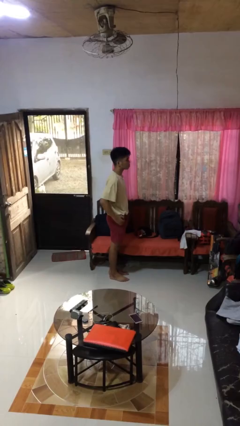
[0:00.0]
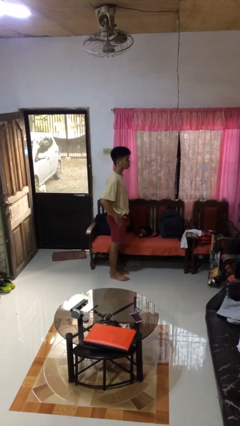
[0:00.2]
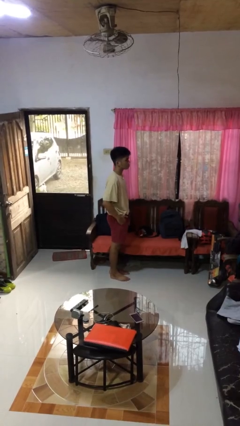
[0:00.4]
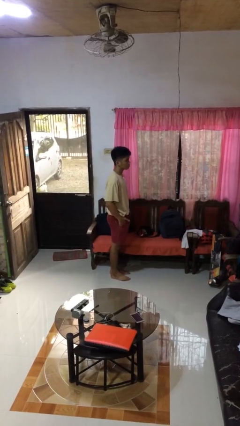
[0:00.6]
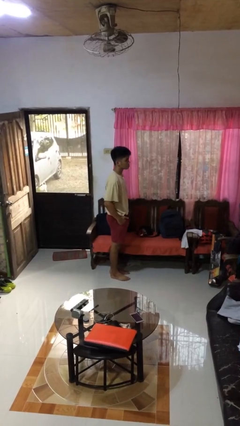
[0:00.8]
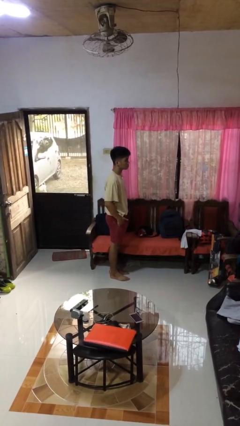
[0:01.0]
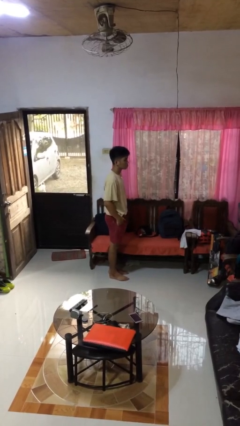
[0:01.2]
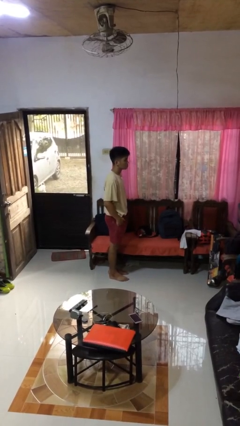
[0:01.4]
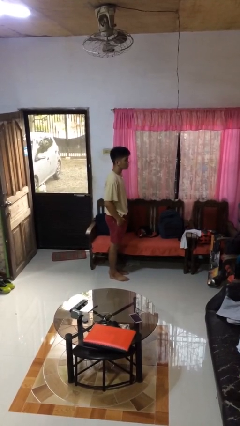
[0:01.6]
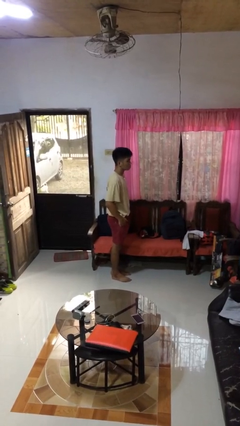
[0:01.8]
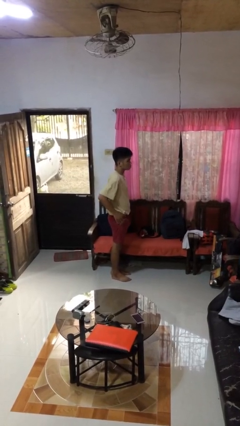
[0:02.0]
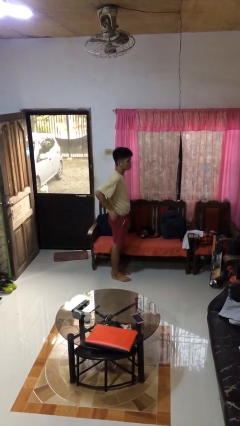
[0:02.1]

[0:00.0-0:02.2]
person puts hands in back pockets

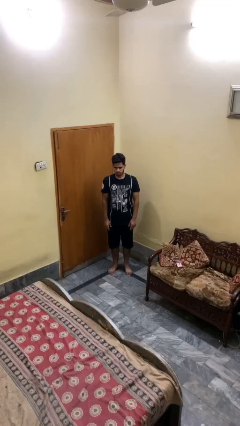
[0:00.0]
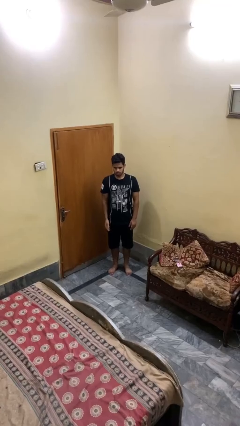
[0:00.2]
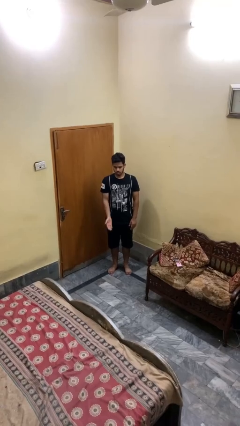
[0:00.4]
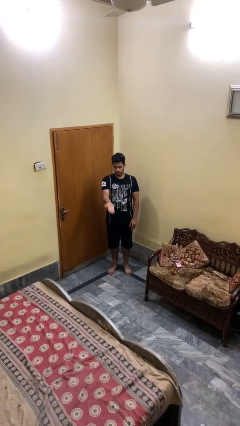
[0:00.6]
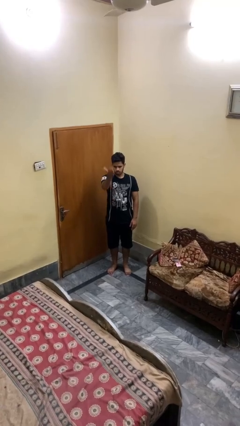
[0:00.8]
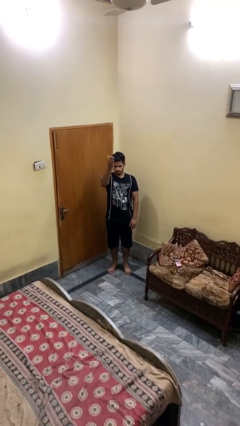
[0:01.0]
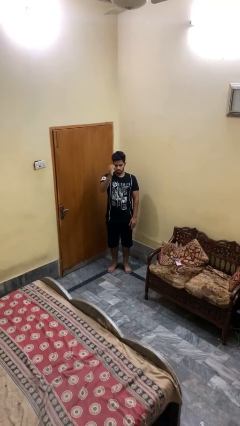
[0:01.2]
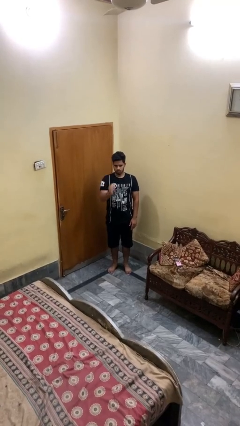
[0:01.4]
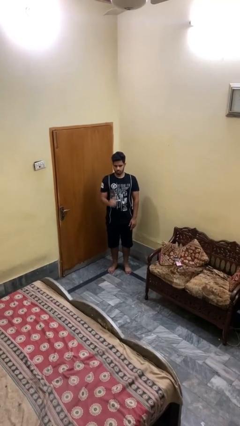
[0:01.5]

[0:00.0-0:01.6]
person gestures swipe up

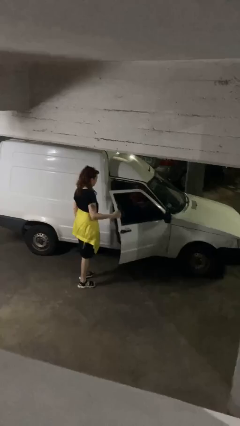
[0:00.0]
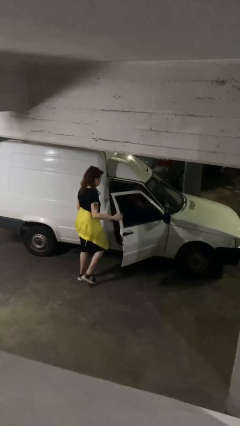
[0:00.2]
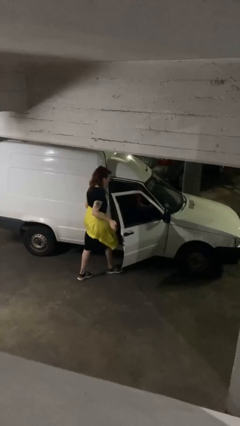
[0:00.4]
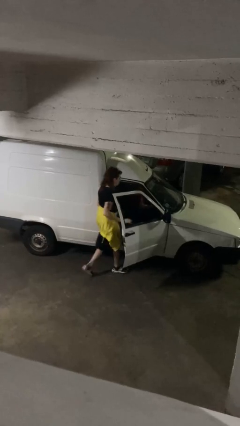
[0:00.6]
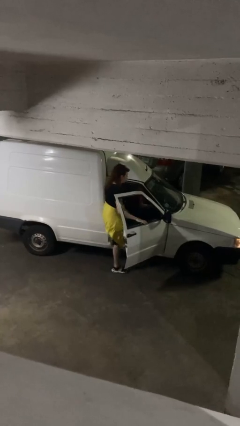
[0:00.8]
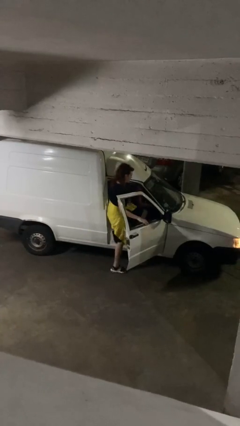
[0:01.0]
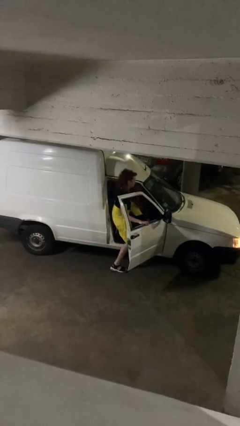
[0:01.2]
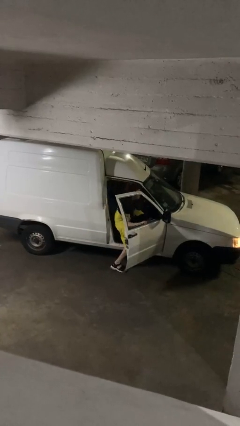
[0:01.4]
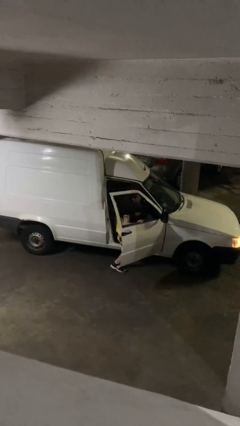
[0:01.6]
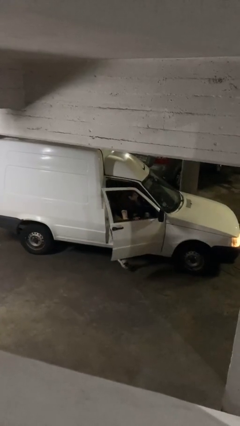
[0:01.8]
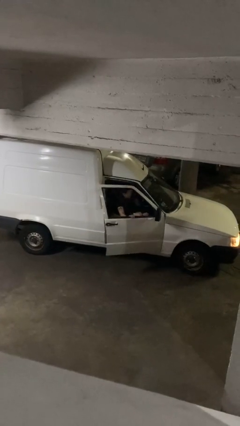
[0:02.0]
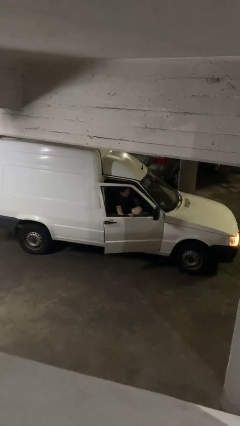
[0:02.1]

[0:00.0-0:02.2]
car picks up person

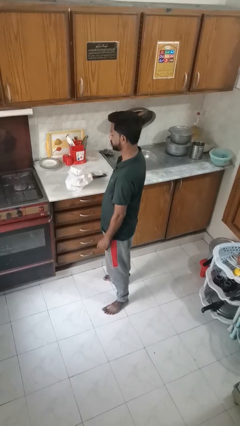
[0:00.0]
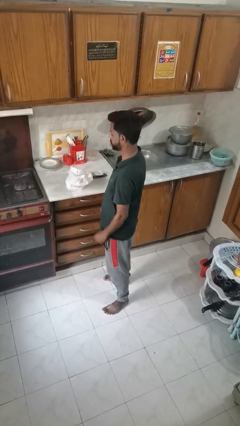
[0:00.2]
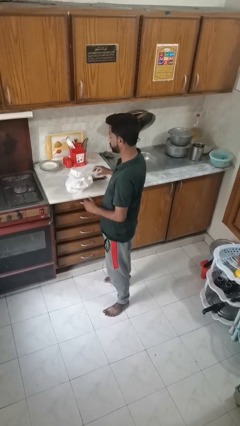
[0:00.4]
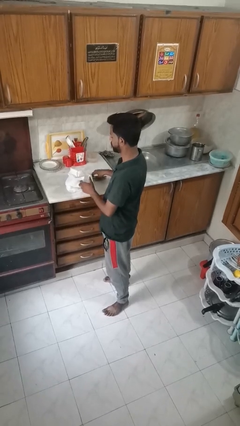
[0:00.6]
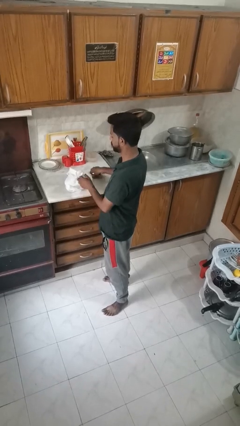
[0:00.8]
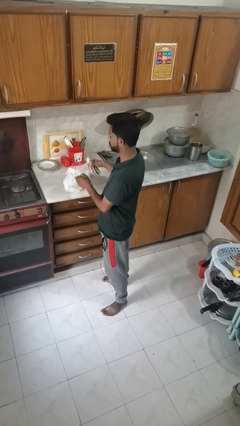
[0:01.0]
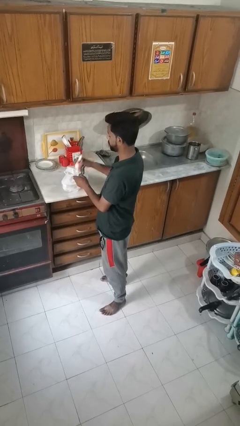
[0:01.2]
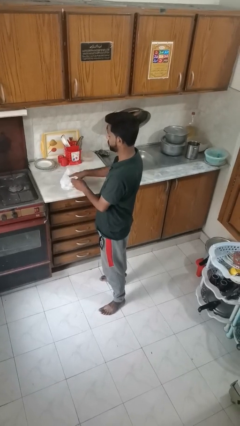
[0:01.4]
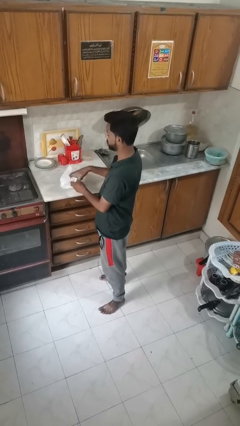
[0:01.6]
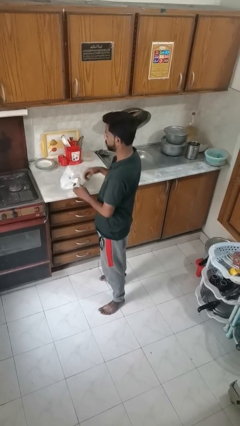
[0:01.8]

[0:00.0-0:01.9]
person puts object into bag

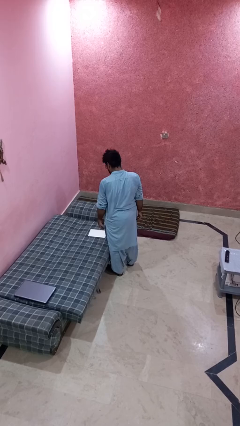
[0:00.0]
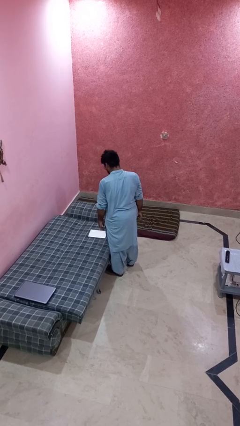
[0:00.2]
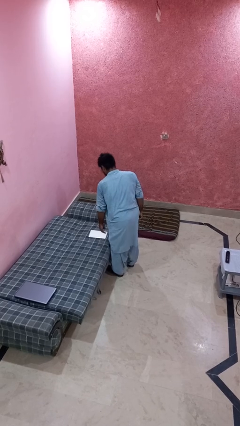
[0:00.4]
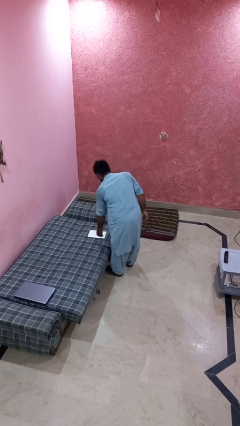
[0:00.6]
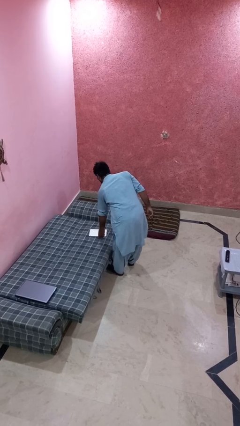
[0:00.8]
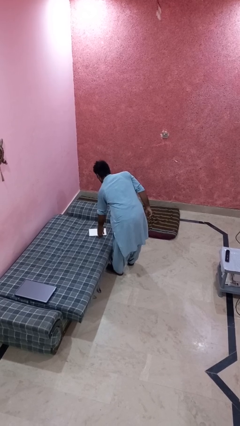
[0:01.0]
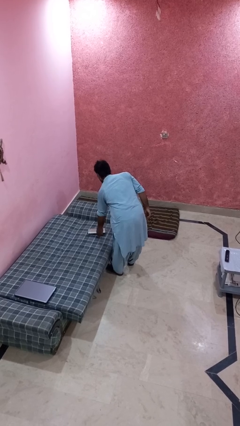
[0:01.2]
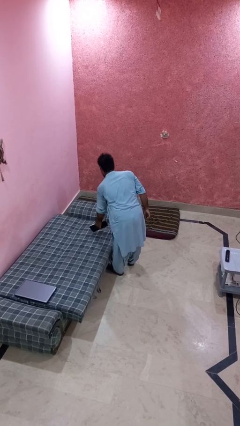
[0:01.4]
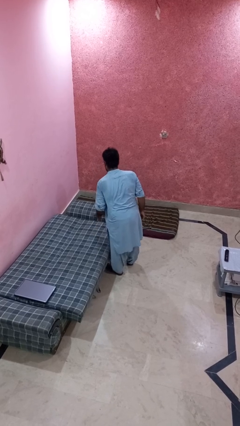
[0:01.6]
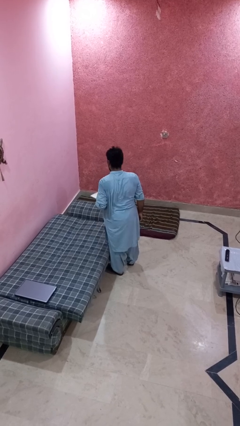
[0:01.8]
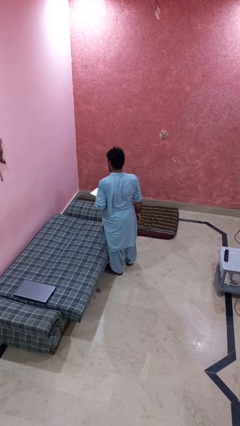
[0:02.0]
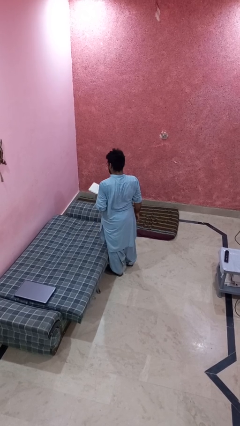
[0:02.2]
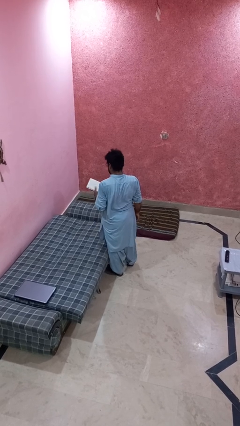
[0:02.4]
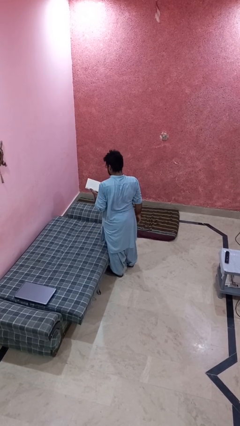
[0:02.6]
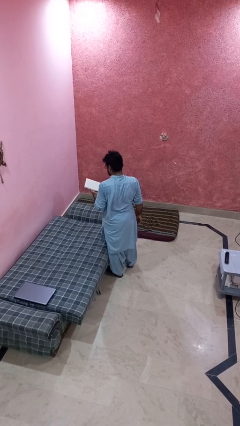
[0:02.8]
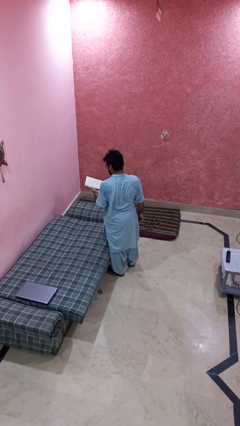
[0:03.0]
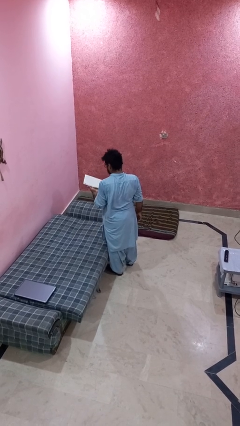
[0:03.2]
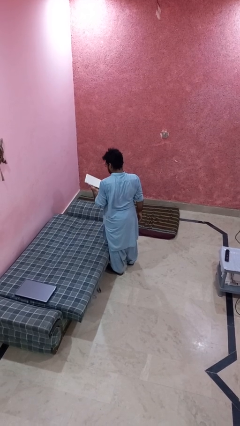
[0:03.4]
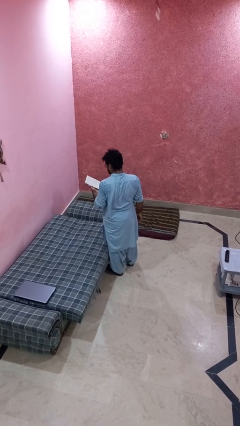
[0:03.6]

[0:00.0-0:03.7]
person picks up object from bed

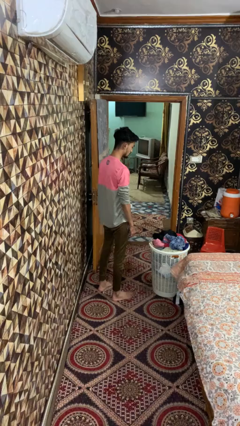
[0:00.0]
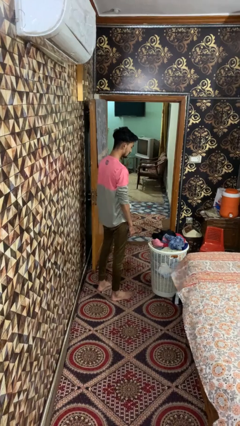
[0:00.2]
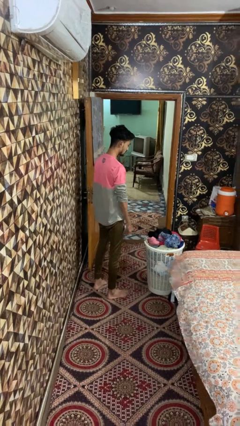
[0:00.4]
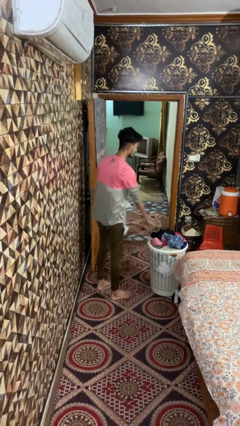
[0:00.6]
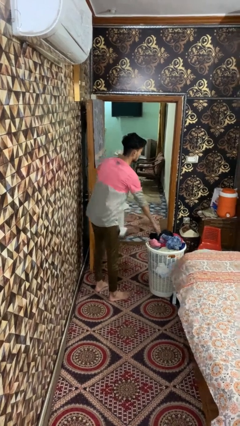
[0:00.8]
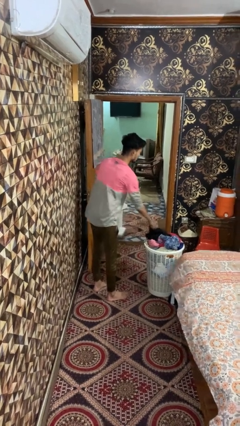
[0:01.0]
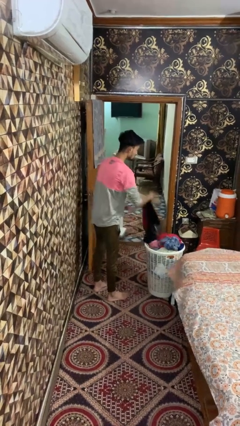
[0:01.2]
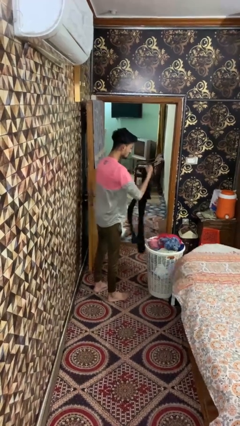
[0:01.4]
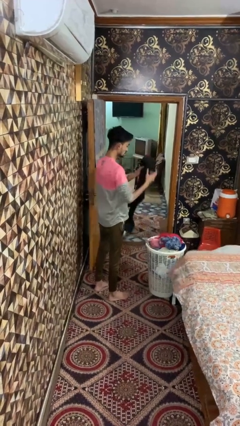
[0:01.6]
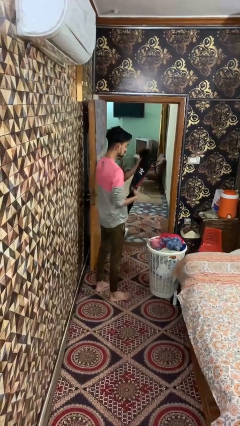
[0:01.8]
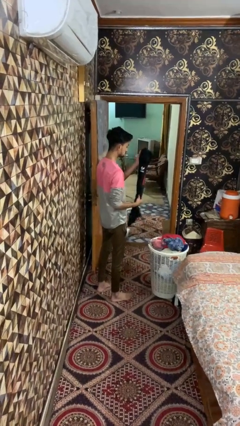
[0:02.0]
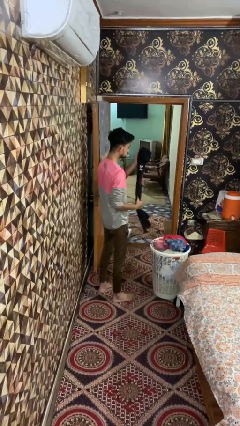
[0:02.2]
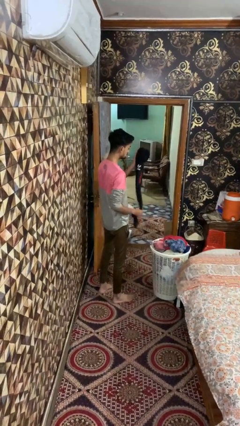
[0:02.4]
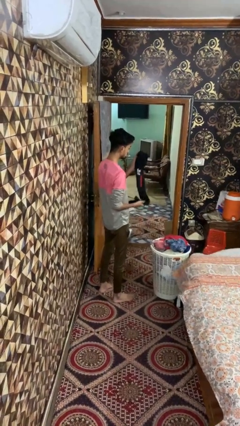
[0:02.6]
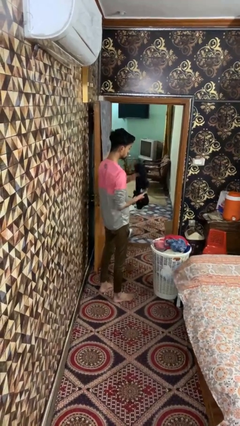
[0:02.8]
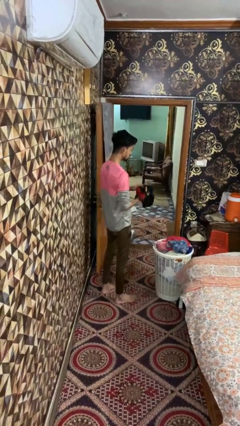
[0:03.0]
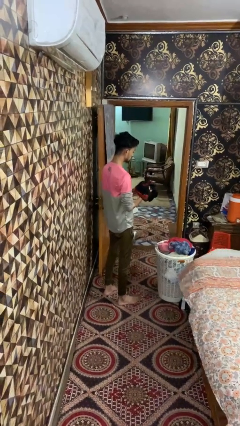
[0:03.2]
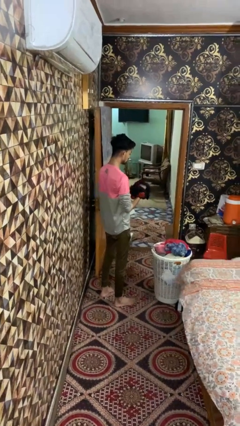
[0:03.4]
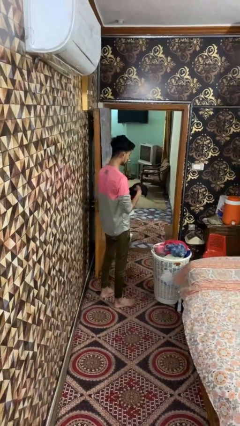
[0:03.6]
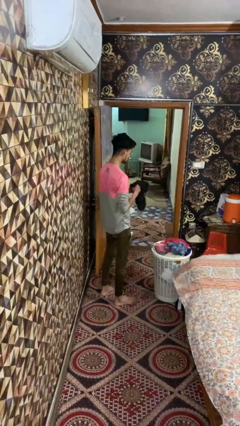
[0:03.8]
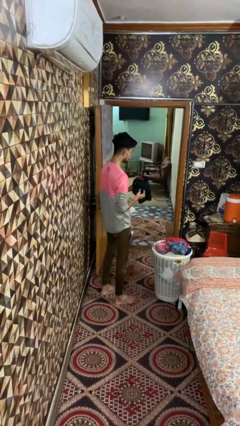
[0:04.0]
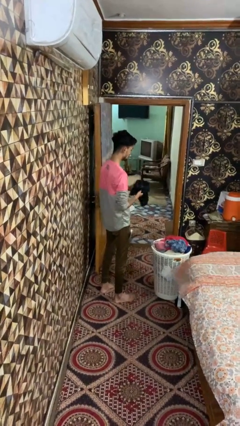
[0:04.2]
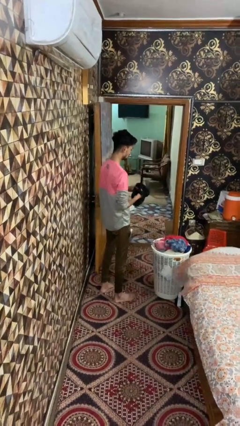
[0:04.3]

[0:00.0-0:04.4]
person puts object into basket

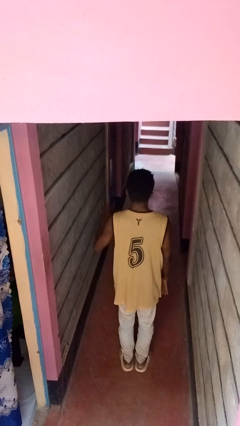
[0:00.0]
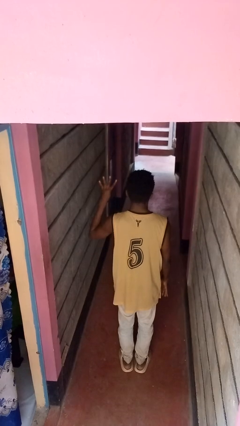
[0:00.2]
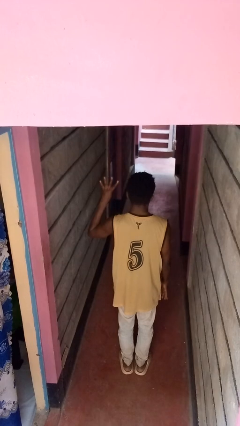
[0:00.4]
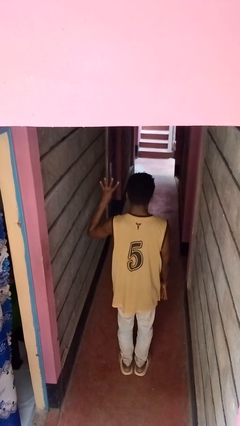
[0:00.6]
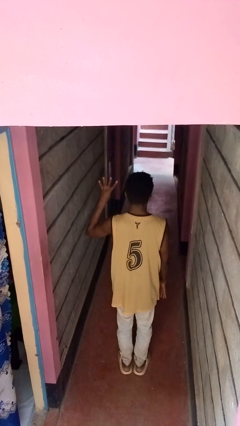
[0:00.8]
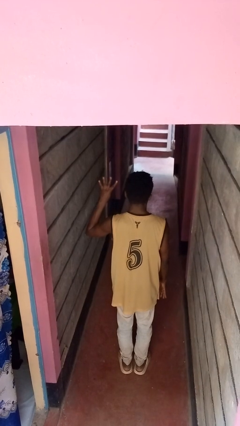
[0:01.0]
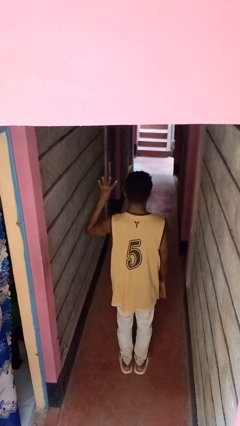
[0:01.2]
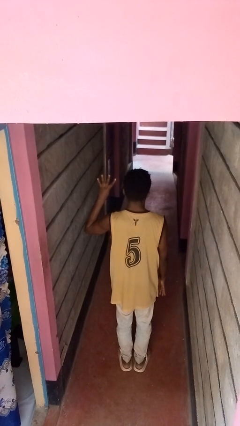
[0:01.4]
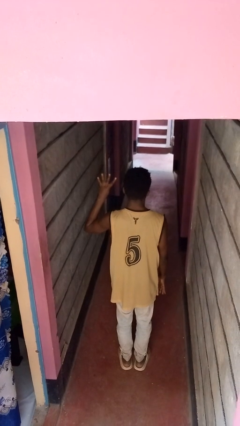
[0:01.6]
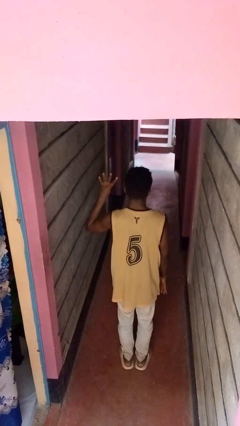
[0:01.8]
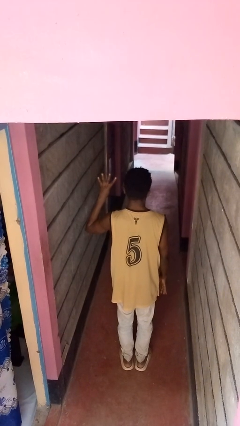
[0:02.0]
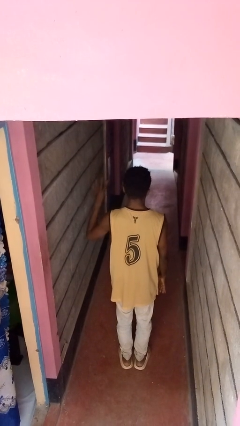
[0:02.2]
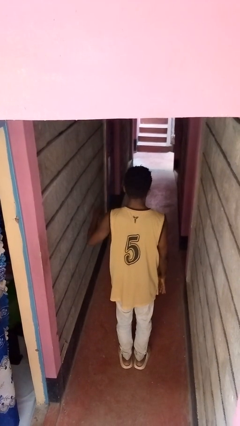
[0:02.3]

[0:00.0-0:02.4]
person gestures number four
